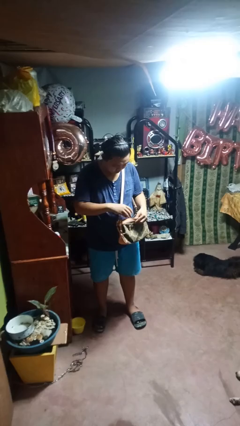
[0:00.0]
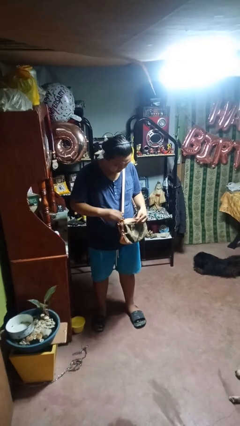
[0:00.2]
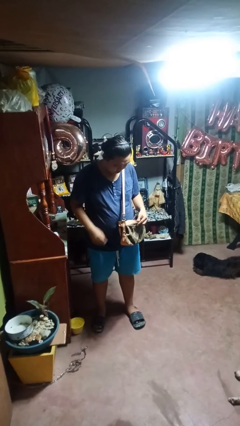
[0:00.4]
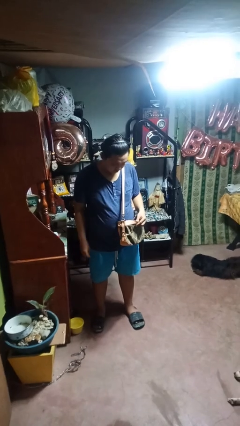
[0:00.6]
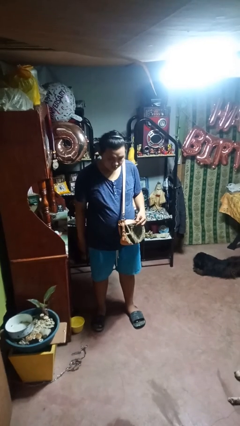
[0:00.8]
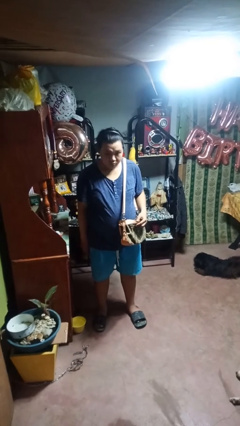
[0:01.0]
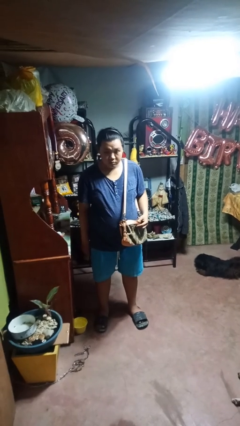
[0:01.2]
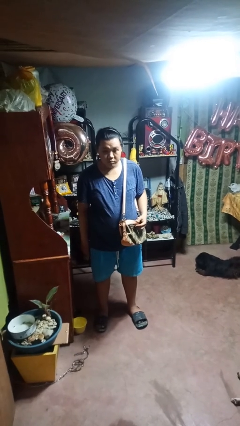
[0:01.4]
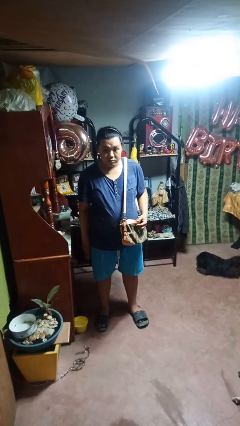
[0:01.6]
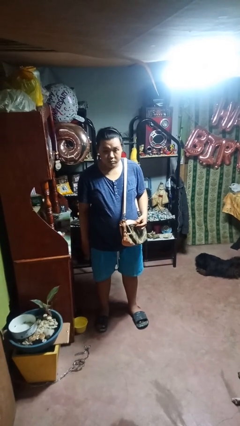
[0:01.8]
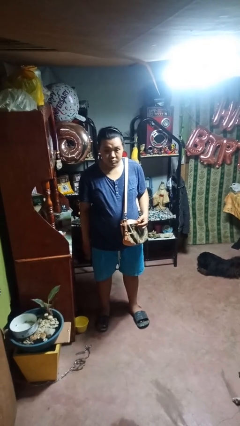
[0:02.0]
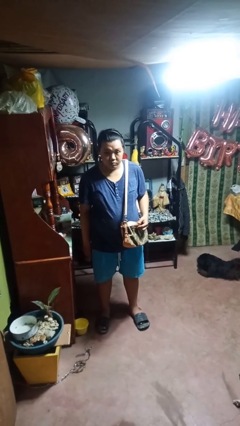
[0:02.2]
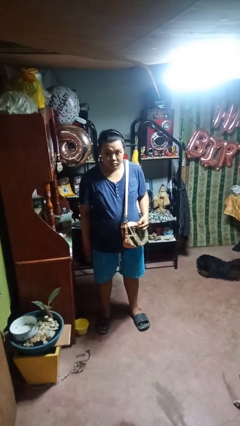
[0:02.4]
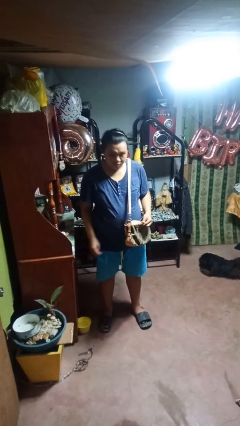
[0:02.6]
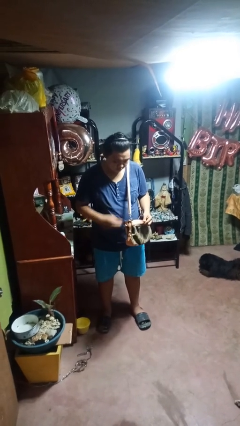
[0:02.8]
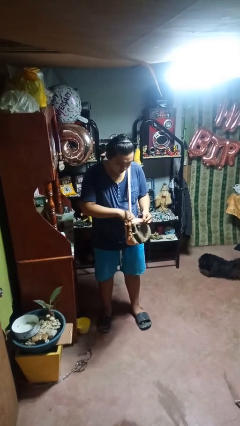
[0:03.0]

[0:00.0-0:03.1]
person puts object into purse

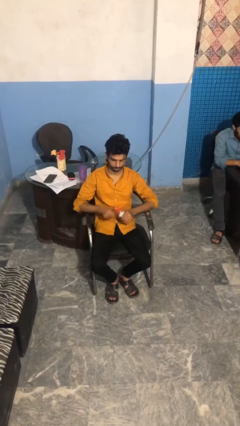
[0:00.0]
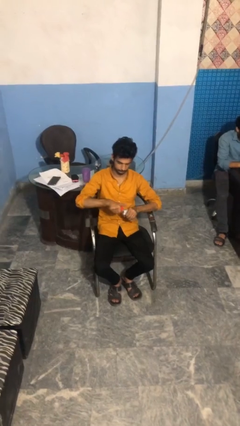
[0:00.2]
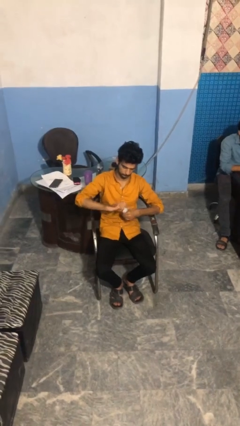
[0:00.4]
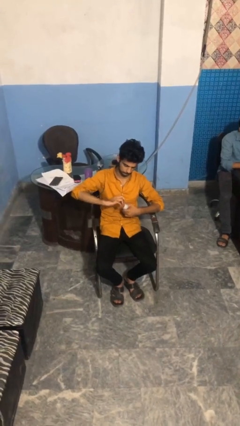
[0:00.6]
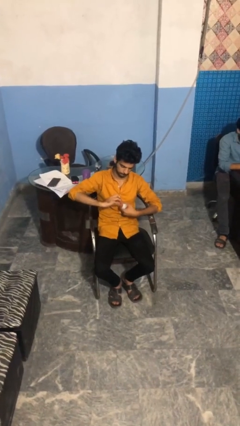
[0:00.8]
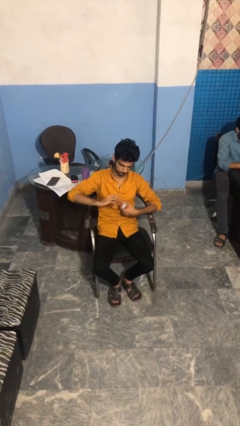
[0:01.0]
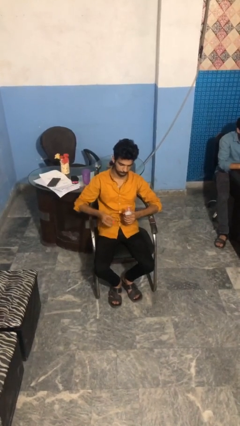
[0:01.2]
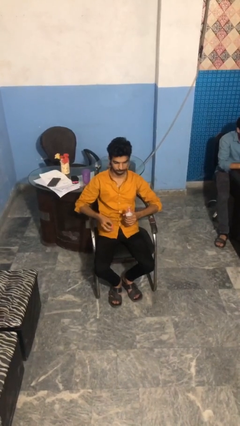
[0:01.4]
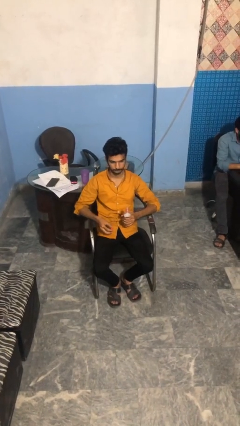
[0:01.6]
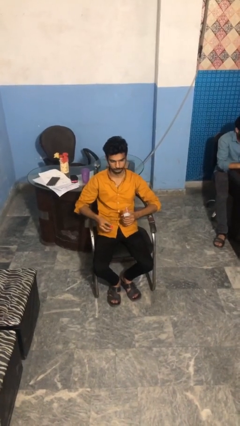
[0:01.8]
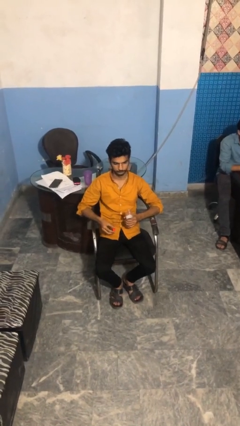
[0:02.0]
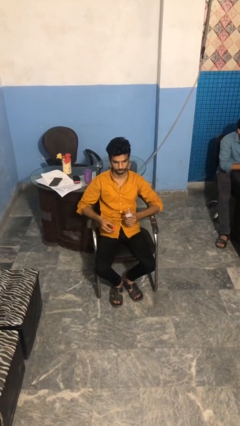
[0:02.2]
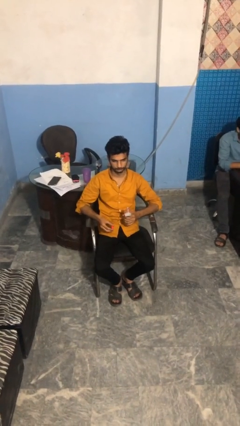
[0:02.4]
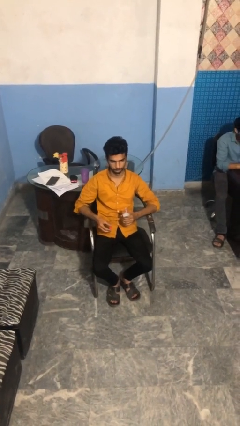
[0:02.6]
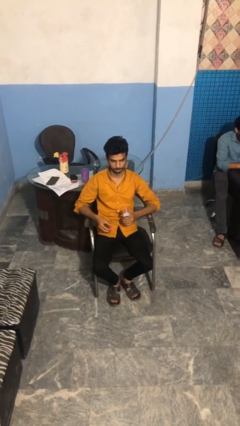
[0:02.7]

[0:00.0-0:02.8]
person unscrews lid from bottle

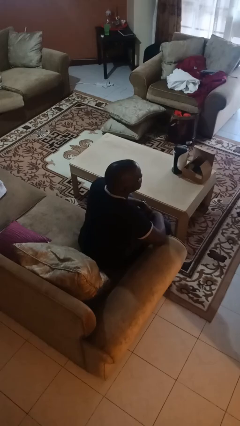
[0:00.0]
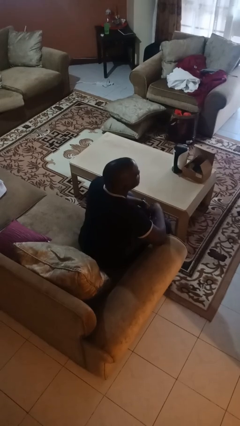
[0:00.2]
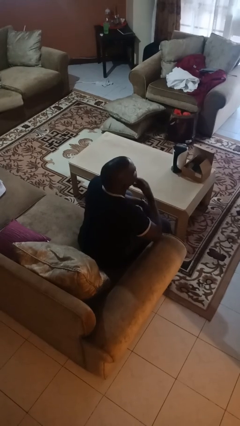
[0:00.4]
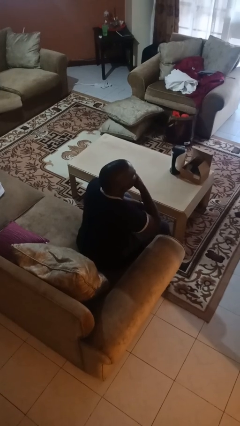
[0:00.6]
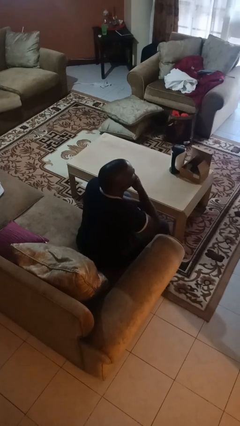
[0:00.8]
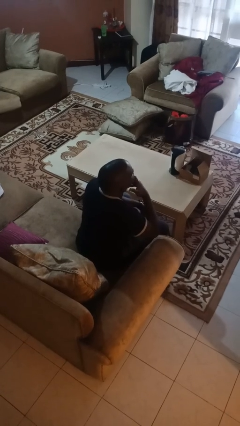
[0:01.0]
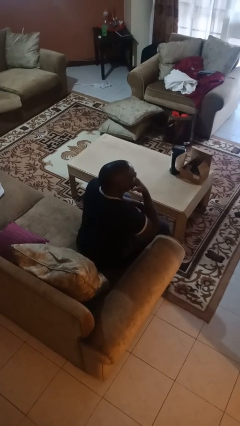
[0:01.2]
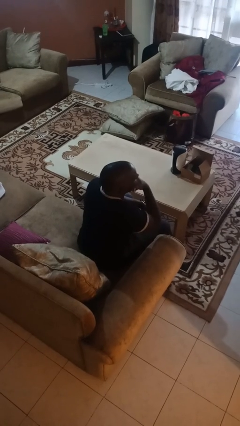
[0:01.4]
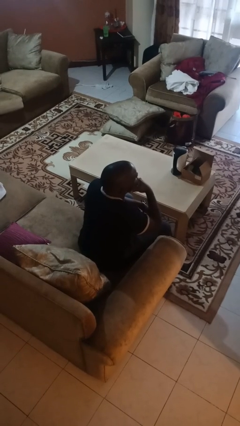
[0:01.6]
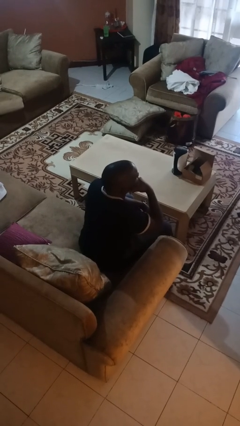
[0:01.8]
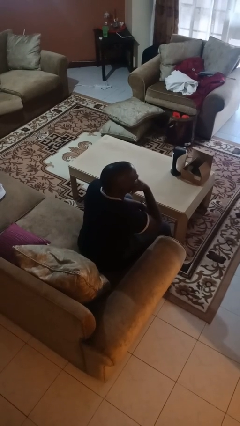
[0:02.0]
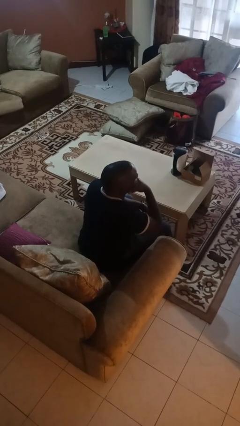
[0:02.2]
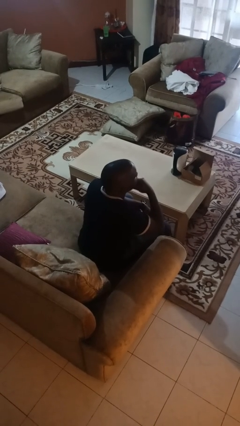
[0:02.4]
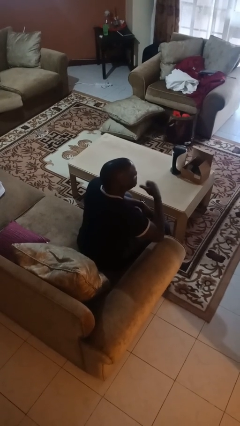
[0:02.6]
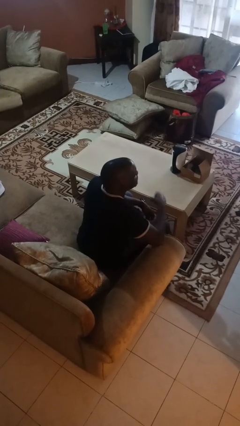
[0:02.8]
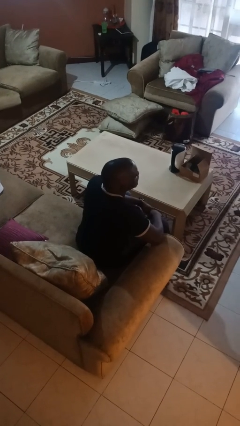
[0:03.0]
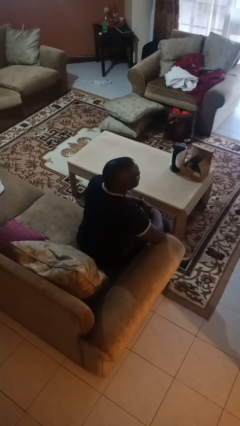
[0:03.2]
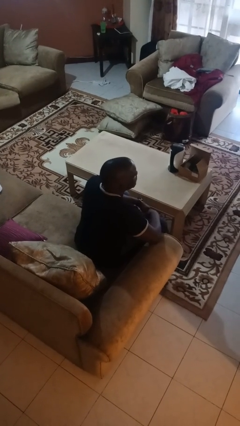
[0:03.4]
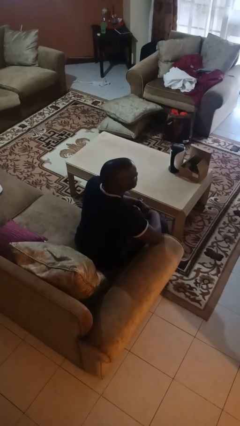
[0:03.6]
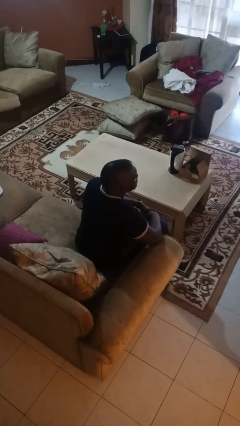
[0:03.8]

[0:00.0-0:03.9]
person strokes chin

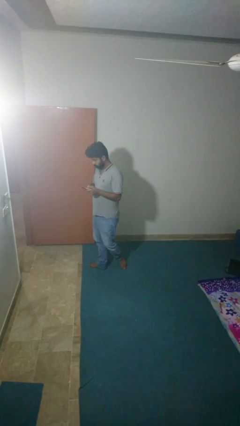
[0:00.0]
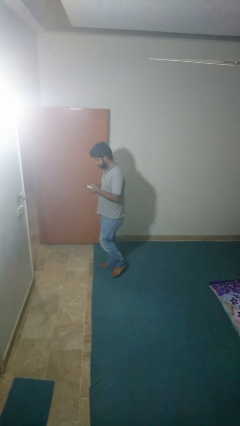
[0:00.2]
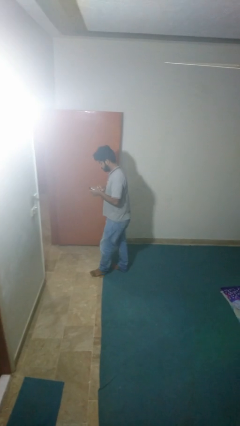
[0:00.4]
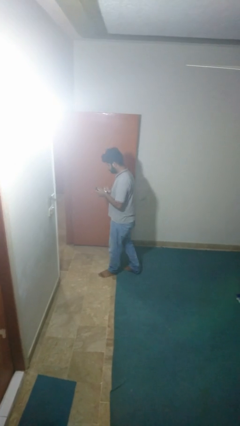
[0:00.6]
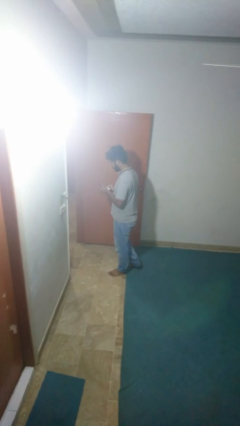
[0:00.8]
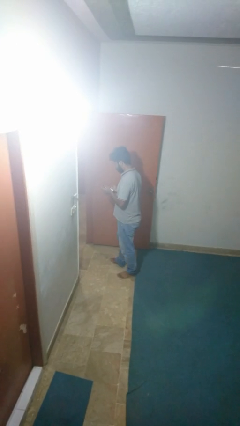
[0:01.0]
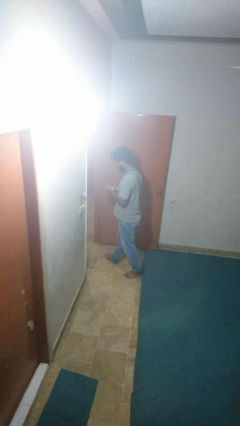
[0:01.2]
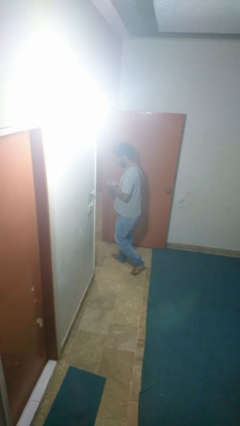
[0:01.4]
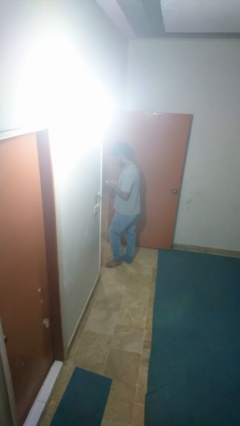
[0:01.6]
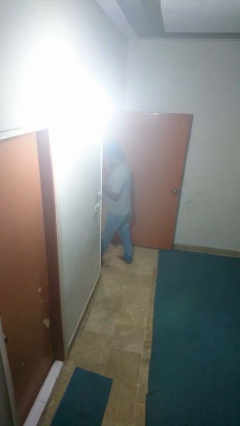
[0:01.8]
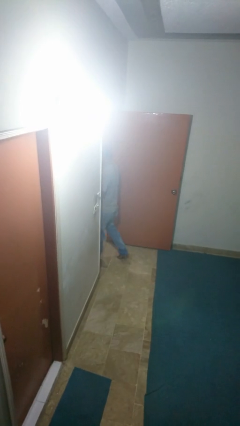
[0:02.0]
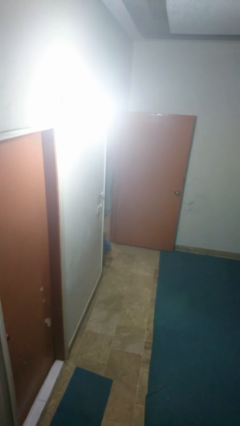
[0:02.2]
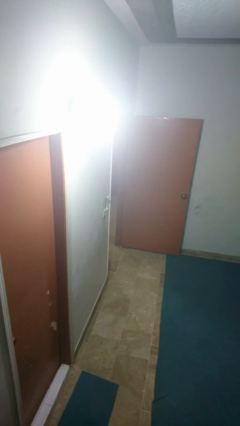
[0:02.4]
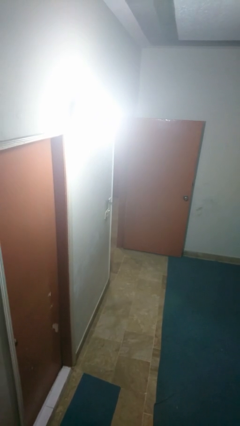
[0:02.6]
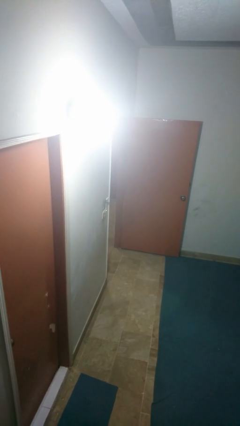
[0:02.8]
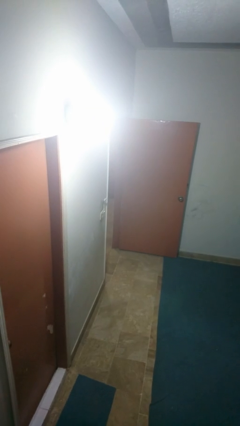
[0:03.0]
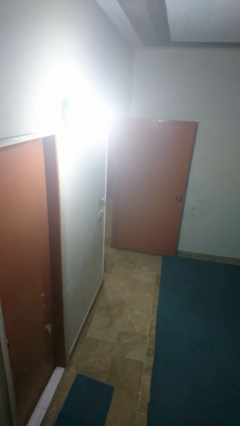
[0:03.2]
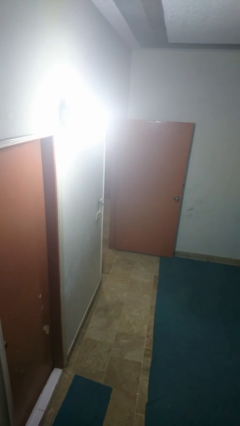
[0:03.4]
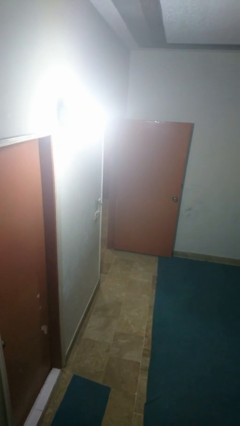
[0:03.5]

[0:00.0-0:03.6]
person exits scene through structure

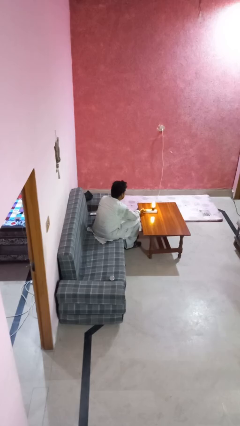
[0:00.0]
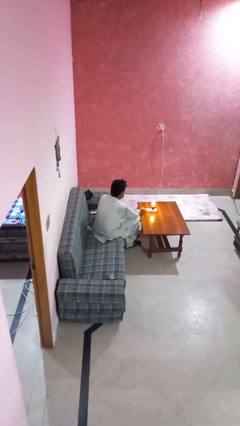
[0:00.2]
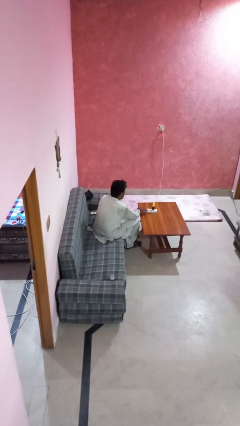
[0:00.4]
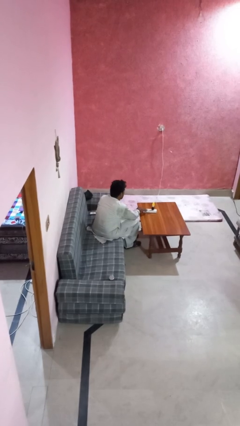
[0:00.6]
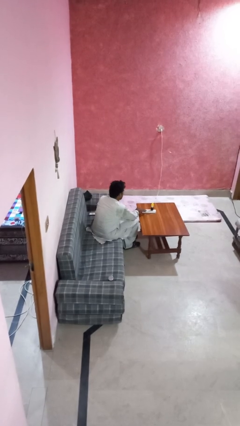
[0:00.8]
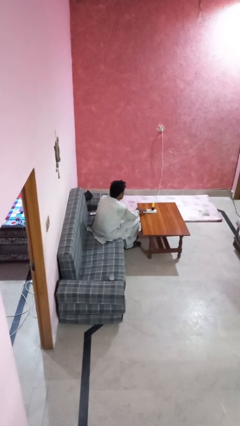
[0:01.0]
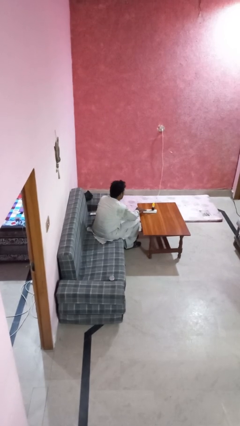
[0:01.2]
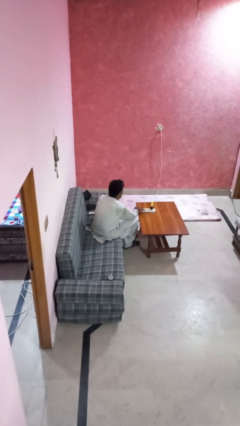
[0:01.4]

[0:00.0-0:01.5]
person turns off lamp

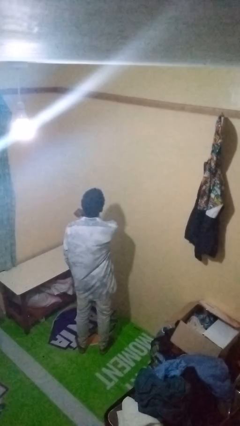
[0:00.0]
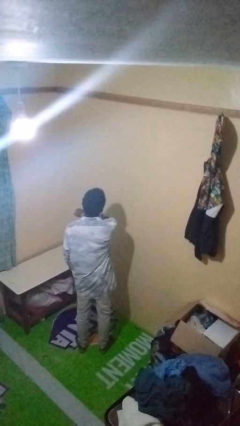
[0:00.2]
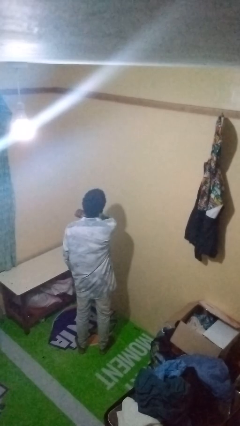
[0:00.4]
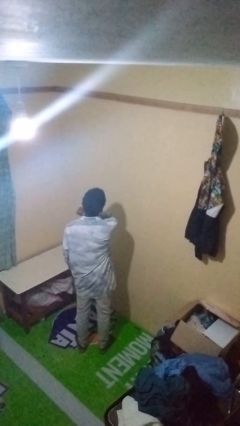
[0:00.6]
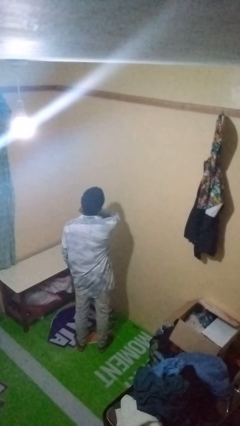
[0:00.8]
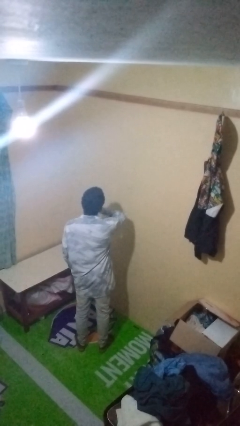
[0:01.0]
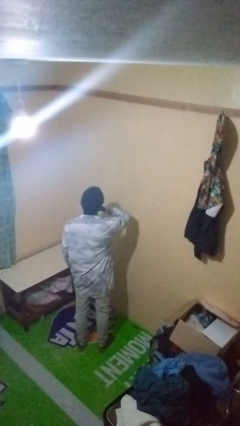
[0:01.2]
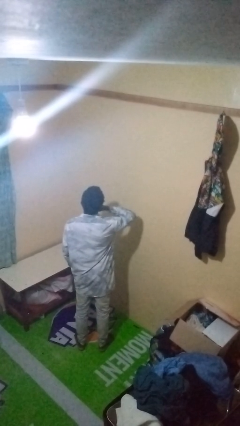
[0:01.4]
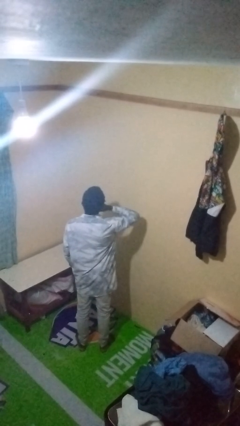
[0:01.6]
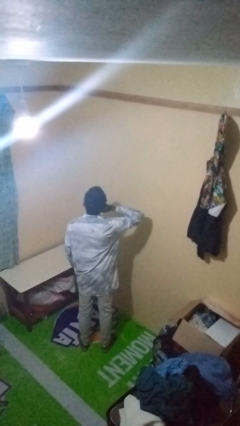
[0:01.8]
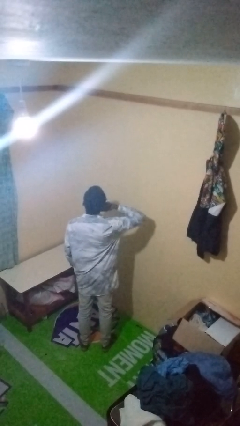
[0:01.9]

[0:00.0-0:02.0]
person gestures cut

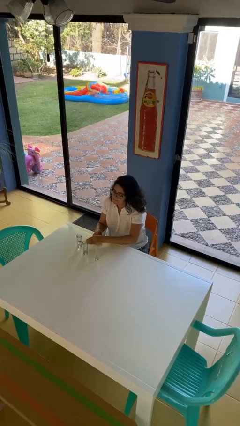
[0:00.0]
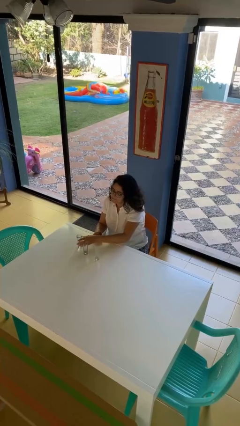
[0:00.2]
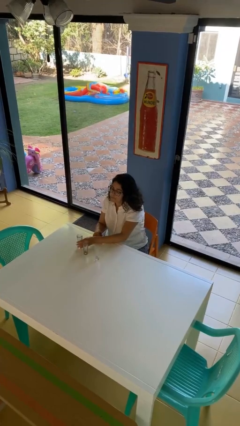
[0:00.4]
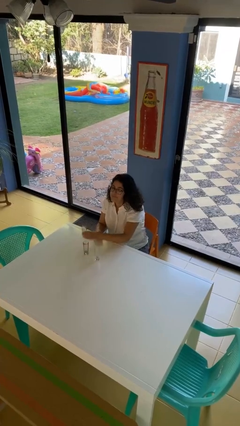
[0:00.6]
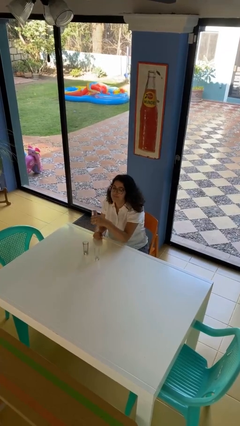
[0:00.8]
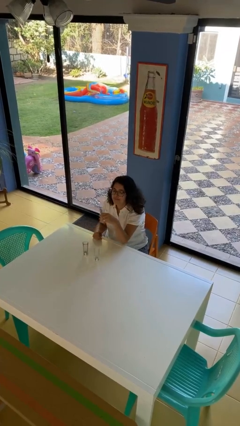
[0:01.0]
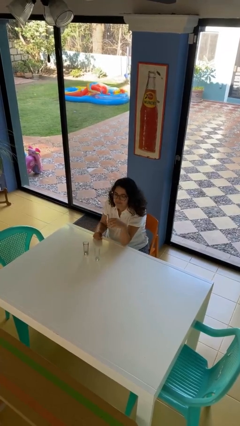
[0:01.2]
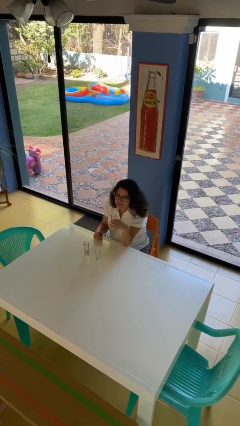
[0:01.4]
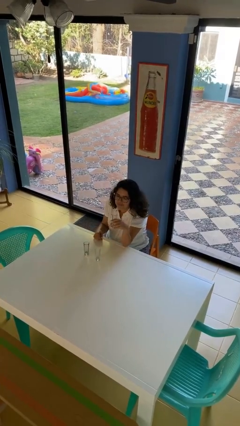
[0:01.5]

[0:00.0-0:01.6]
person picks up object from table
